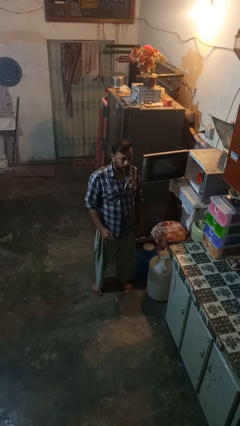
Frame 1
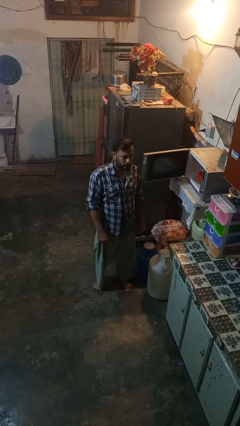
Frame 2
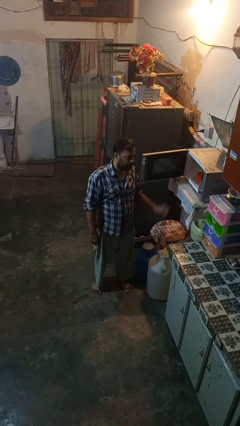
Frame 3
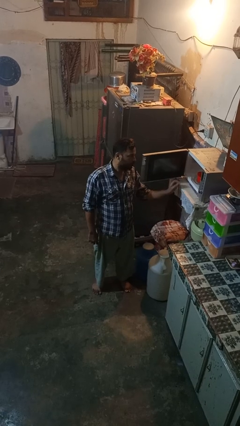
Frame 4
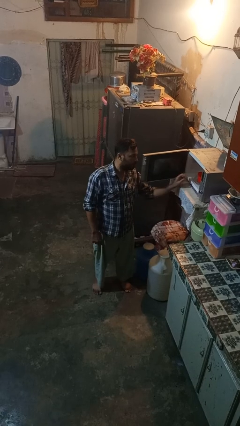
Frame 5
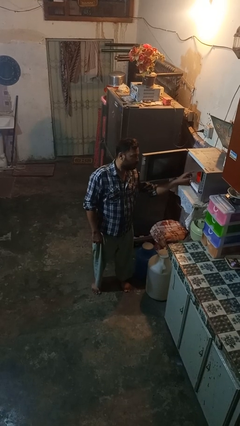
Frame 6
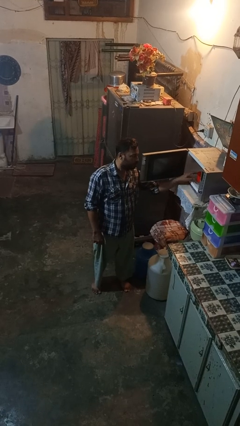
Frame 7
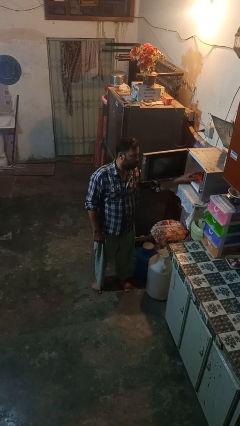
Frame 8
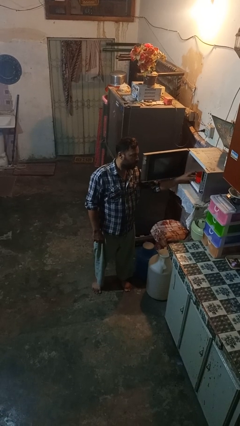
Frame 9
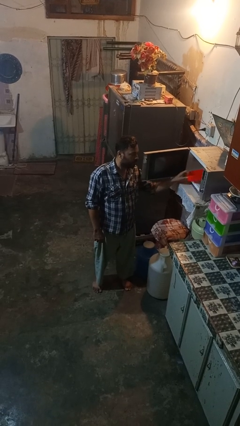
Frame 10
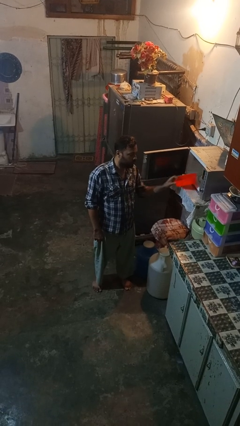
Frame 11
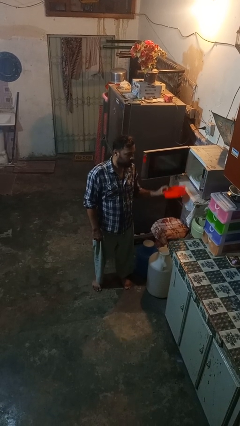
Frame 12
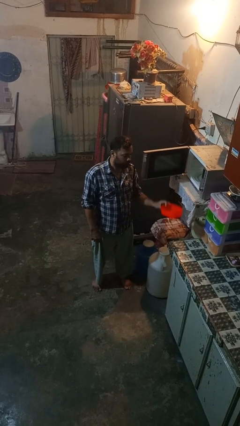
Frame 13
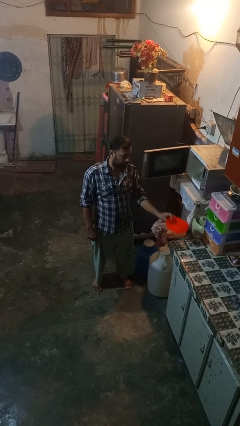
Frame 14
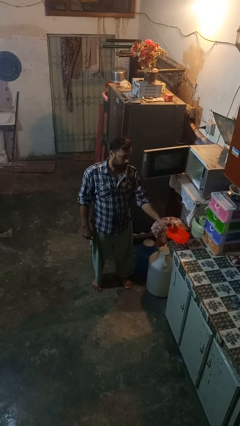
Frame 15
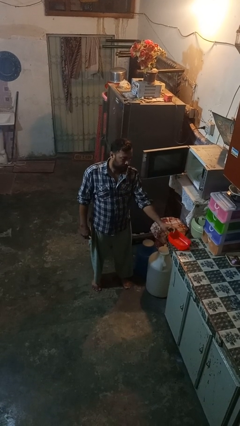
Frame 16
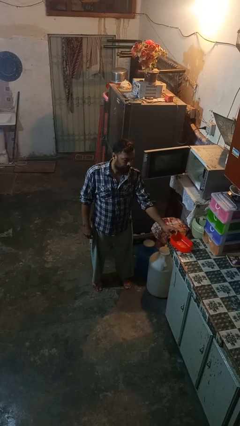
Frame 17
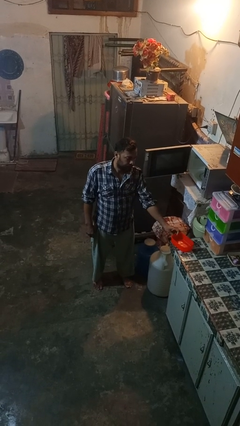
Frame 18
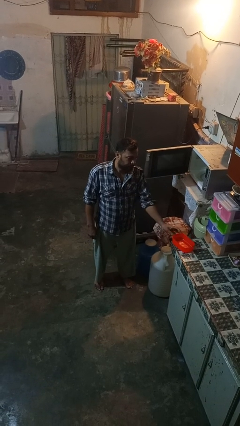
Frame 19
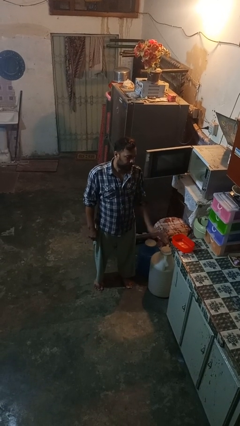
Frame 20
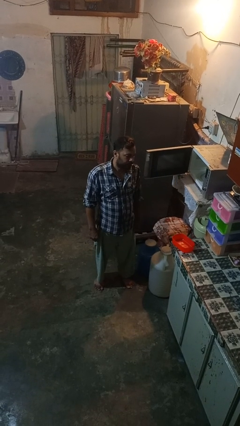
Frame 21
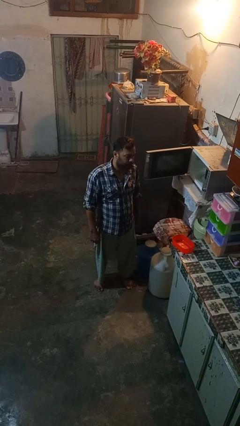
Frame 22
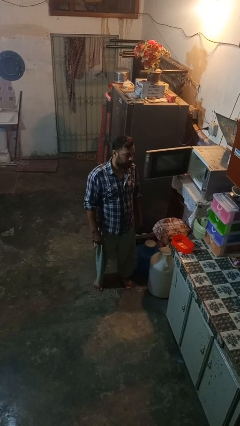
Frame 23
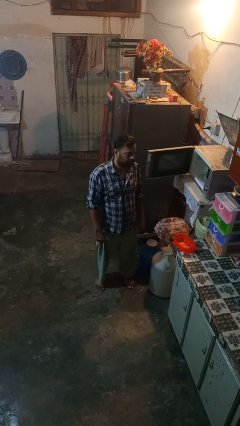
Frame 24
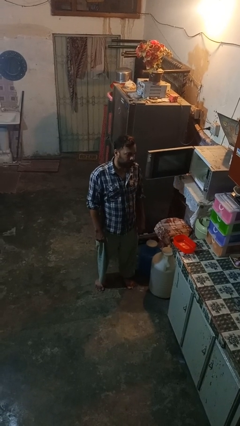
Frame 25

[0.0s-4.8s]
person takes object from microwave

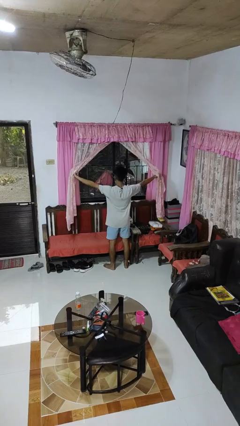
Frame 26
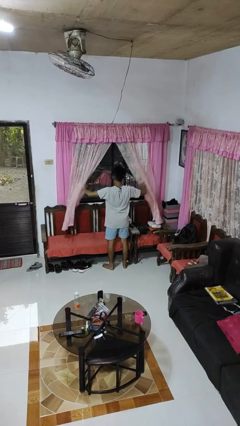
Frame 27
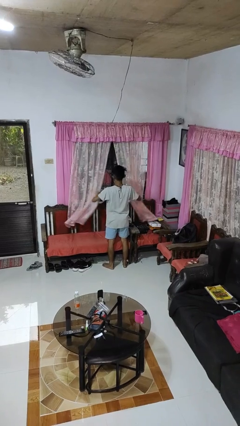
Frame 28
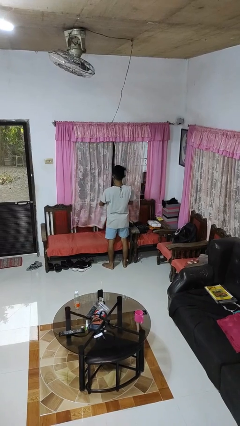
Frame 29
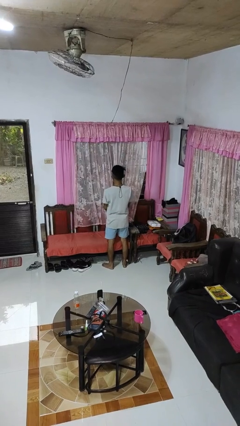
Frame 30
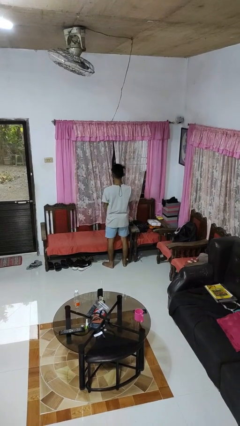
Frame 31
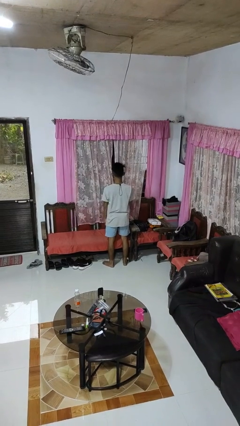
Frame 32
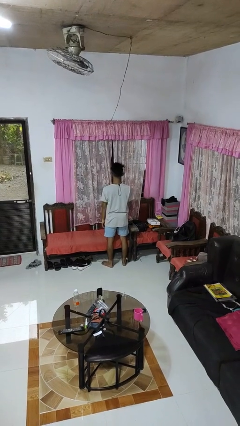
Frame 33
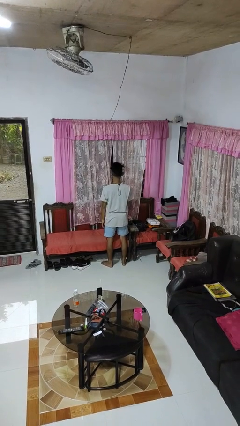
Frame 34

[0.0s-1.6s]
person closes curtains

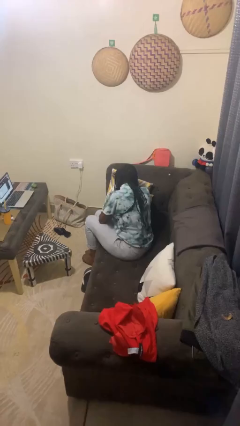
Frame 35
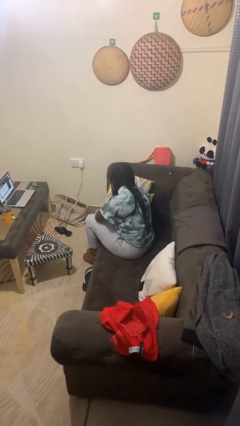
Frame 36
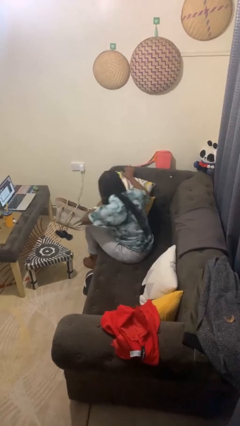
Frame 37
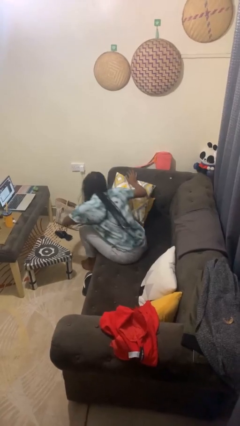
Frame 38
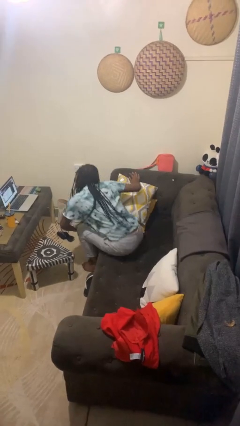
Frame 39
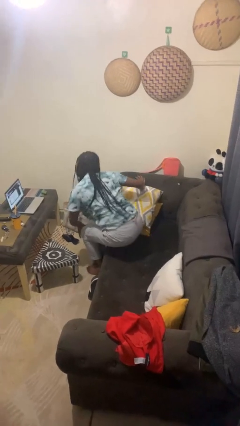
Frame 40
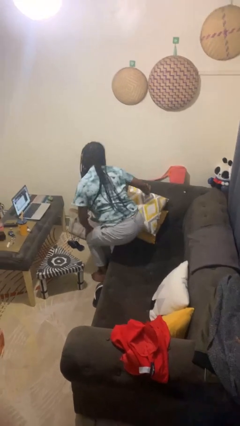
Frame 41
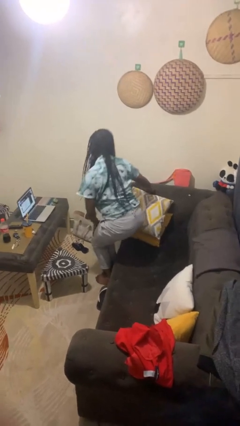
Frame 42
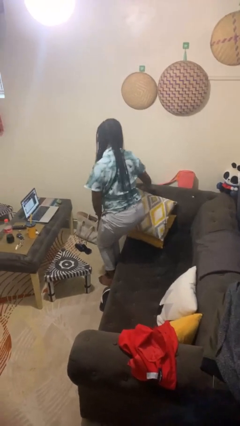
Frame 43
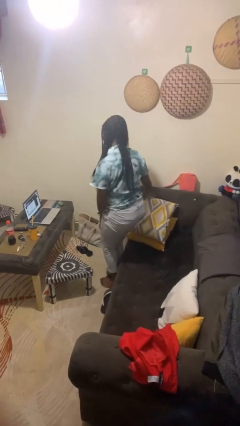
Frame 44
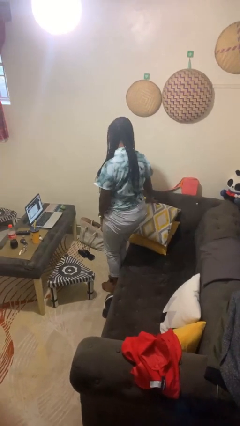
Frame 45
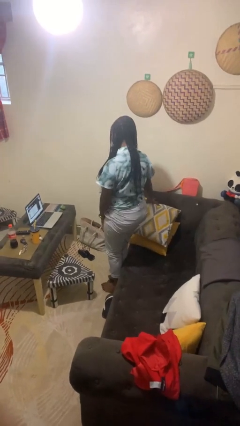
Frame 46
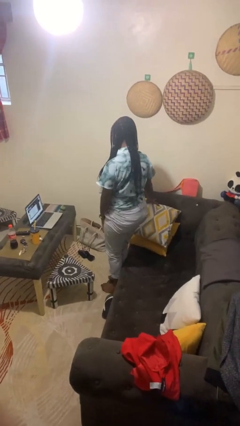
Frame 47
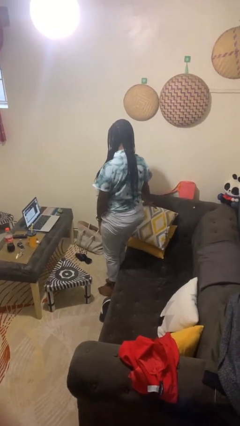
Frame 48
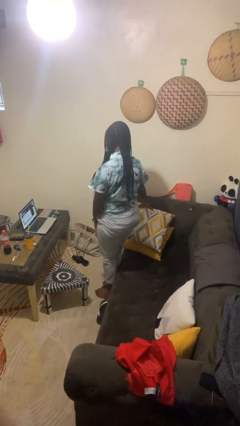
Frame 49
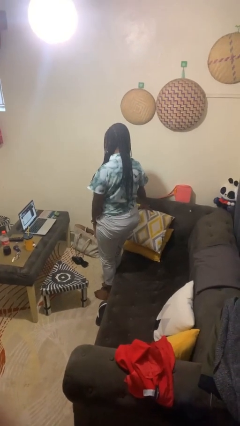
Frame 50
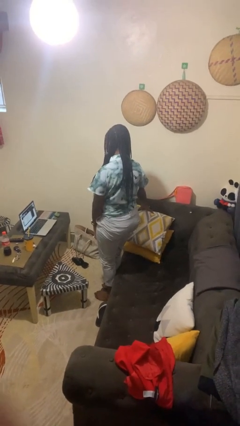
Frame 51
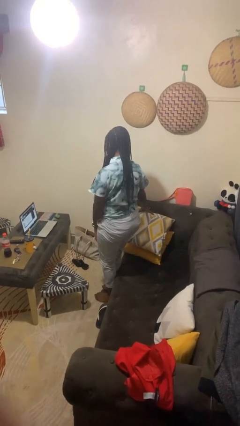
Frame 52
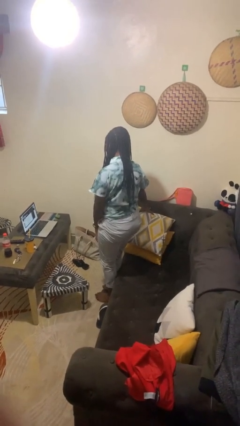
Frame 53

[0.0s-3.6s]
person stands up

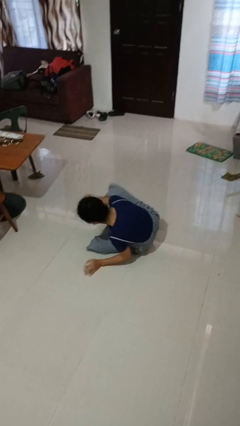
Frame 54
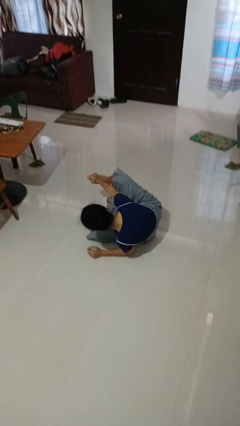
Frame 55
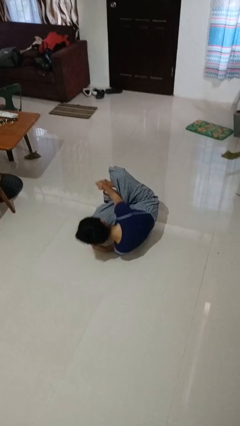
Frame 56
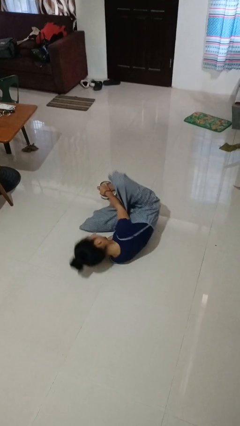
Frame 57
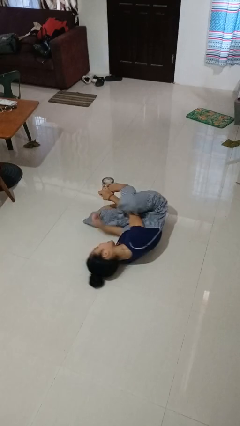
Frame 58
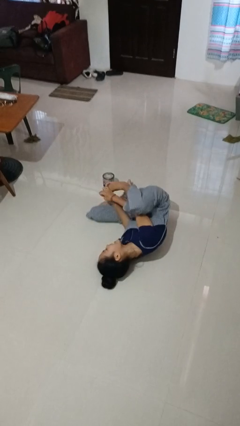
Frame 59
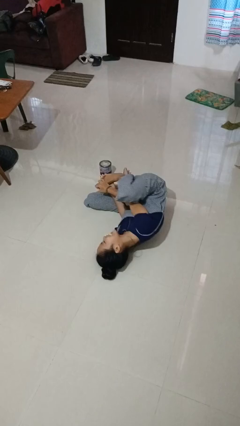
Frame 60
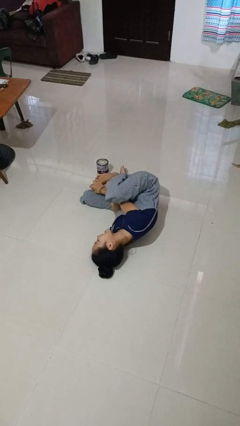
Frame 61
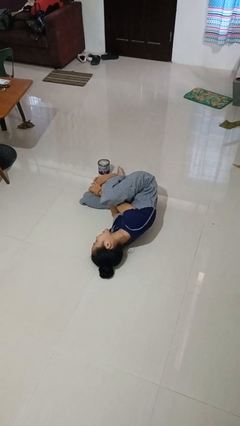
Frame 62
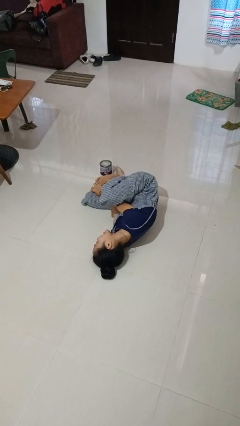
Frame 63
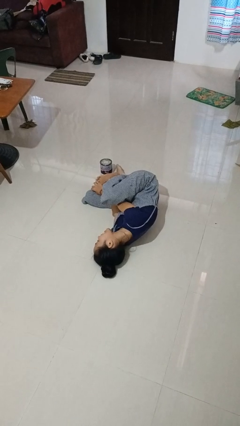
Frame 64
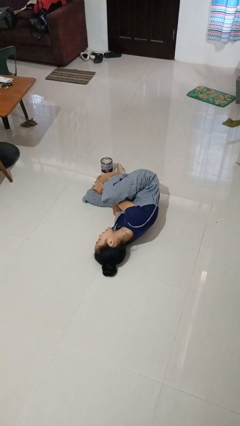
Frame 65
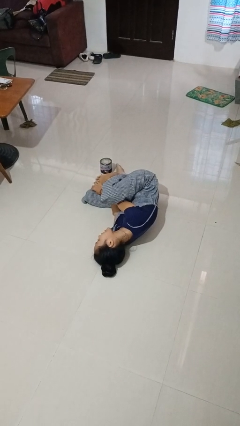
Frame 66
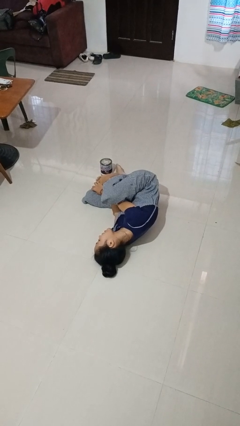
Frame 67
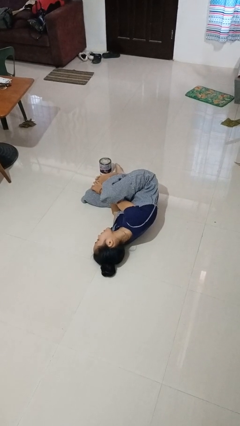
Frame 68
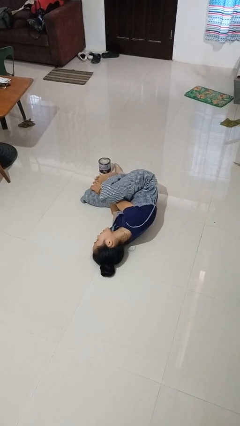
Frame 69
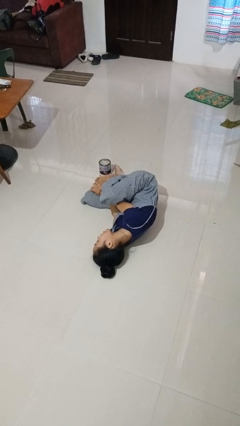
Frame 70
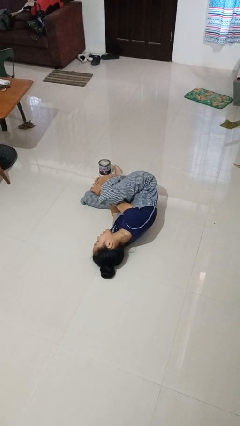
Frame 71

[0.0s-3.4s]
person lies down on floor

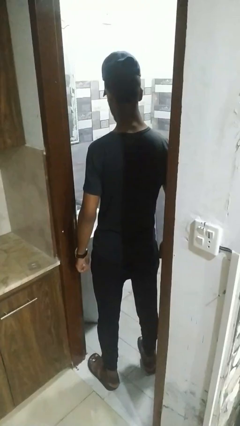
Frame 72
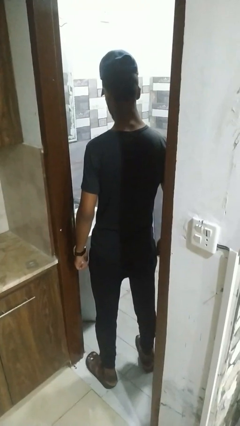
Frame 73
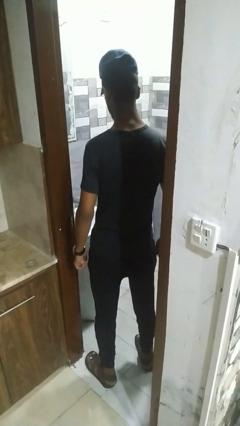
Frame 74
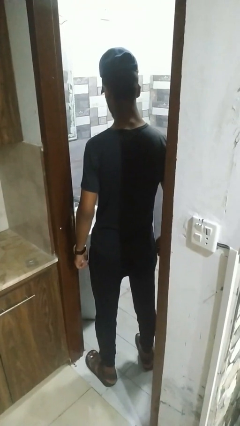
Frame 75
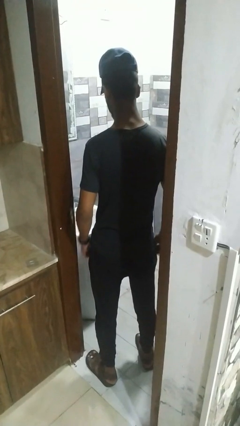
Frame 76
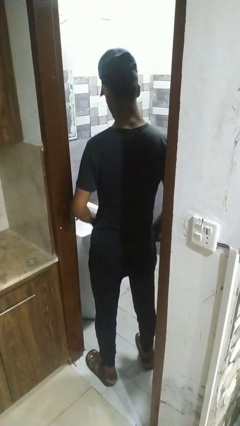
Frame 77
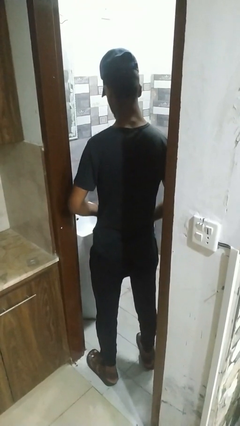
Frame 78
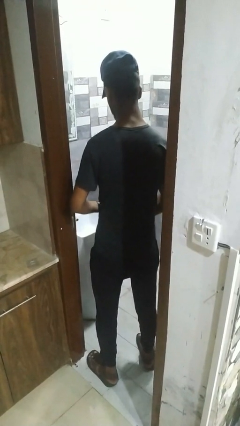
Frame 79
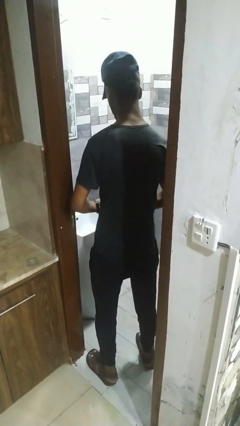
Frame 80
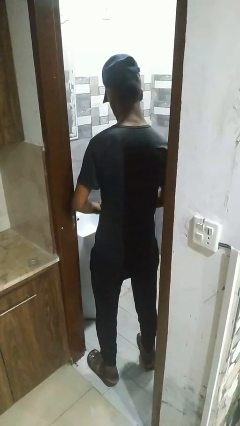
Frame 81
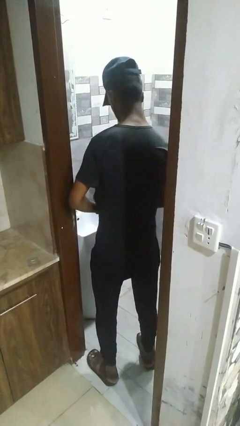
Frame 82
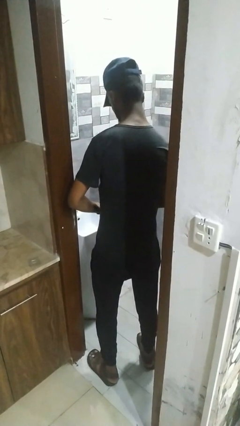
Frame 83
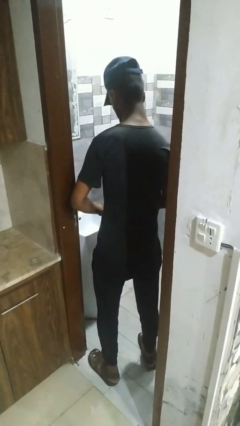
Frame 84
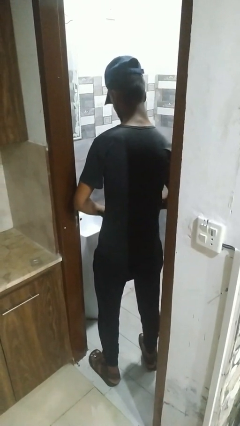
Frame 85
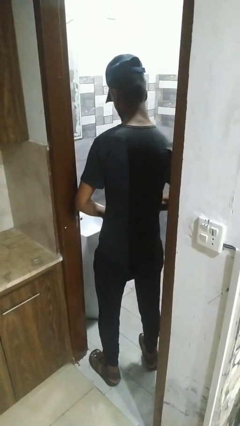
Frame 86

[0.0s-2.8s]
person applies deodorant

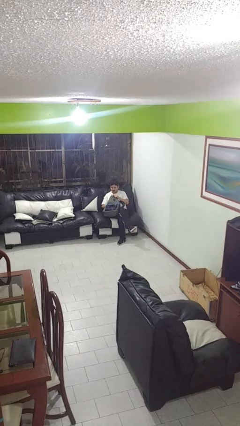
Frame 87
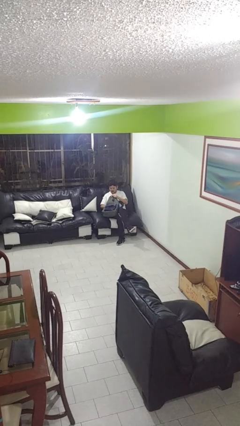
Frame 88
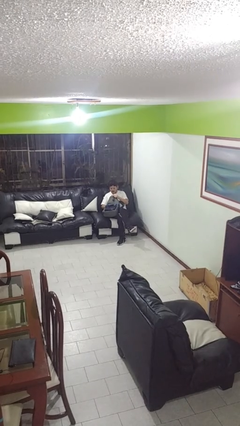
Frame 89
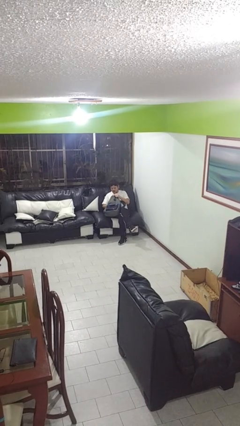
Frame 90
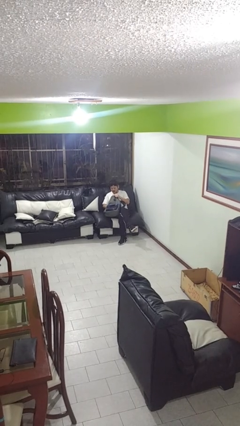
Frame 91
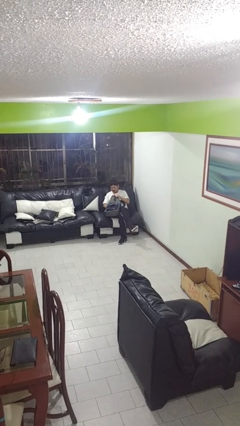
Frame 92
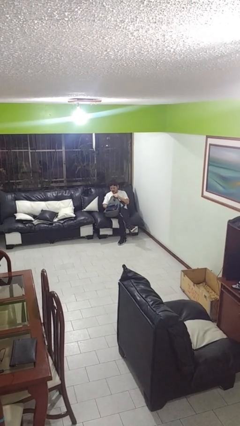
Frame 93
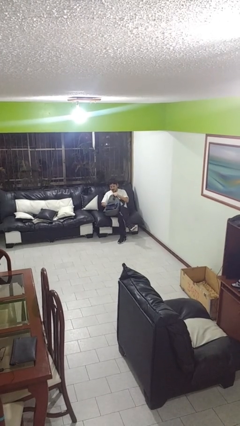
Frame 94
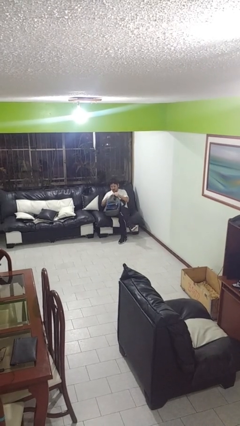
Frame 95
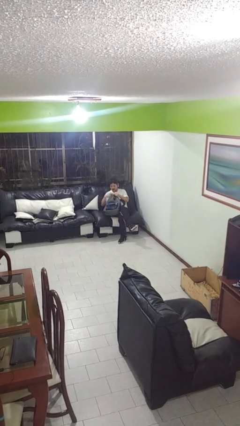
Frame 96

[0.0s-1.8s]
person searches in backpack
